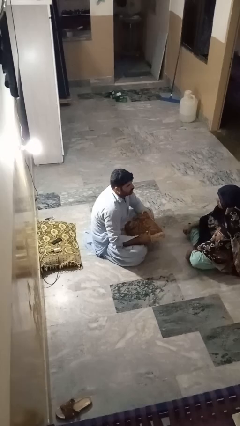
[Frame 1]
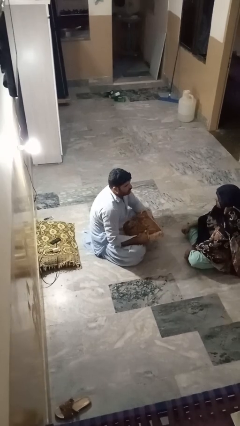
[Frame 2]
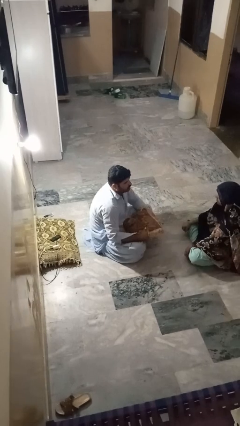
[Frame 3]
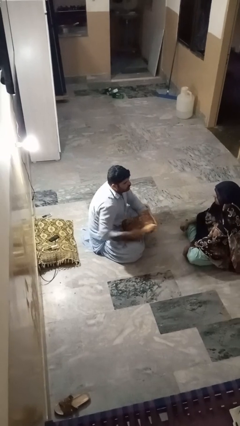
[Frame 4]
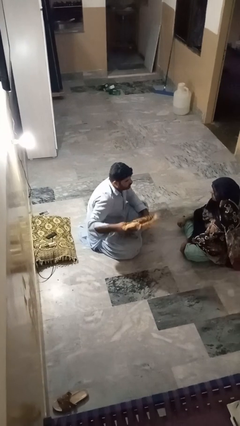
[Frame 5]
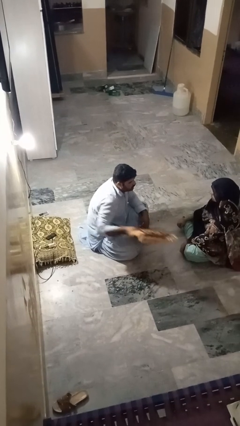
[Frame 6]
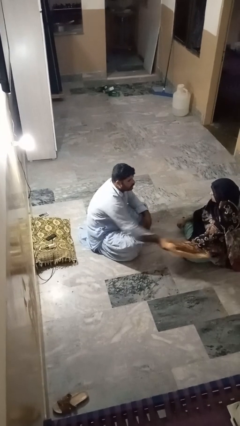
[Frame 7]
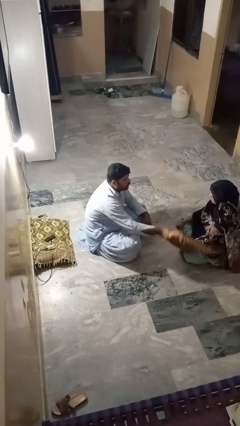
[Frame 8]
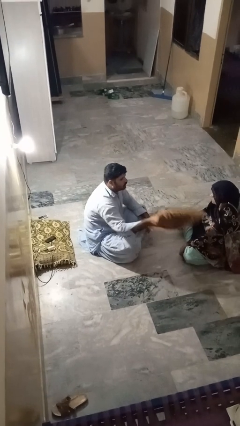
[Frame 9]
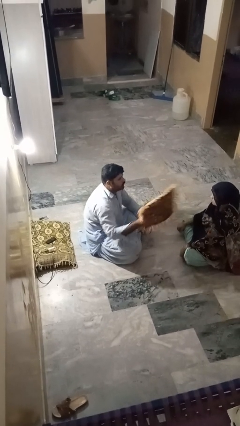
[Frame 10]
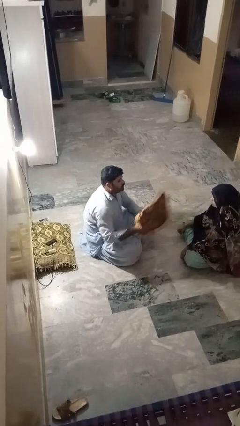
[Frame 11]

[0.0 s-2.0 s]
person hits person with pillow

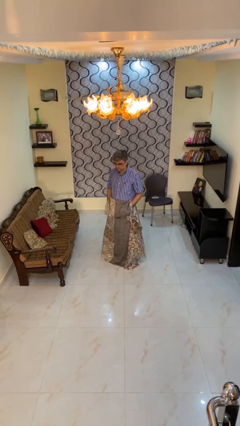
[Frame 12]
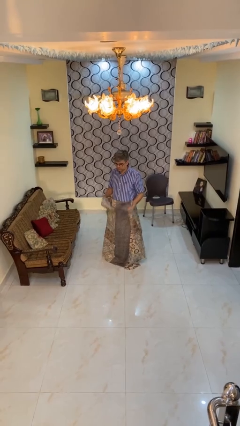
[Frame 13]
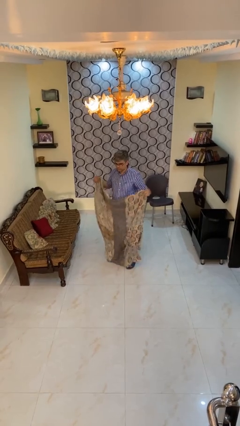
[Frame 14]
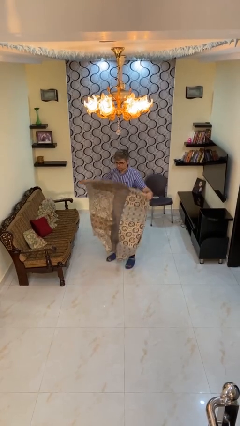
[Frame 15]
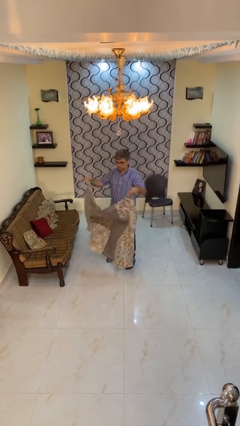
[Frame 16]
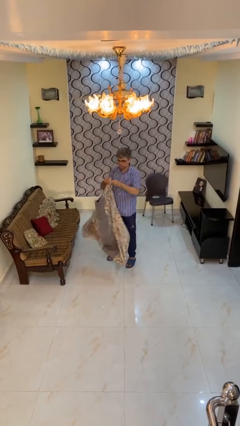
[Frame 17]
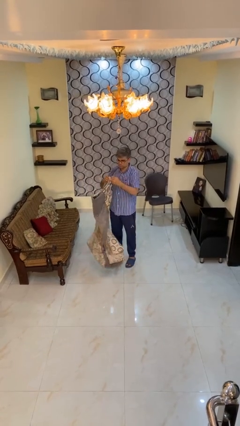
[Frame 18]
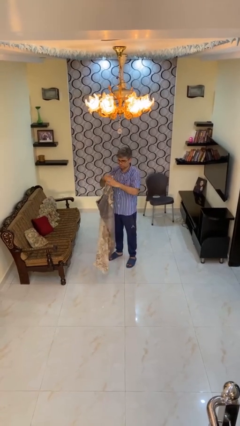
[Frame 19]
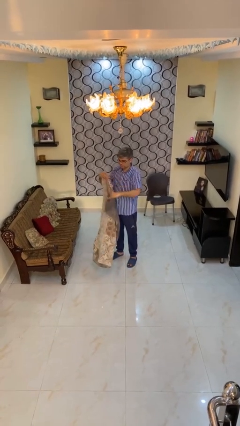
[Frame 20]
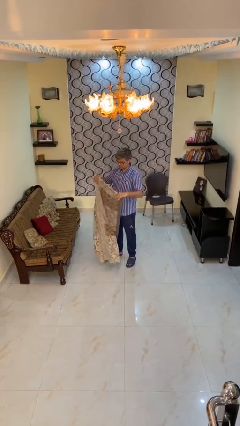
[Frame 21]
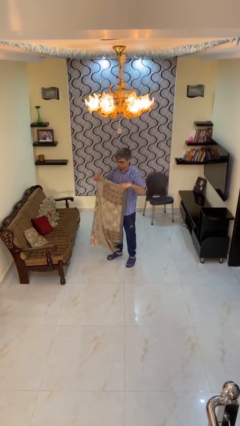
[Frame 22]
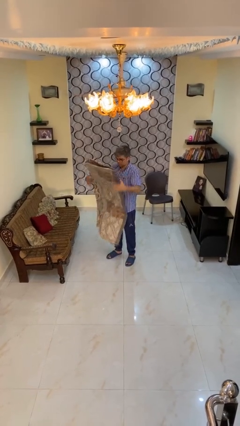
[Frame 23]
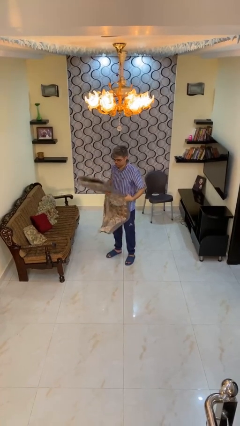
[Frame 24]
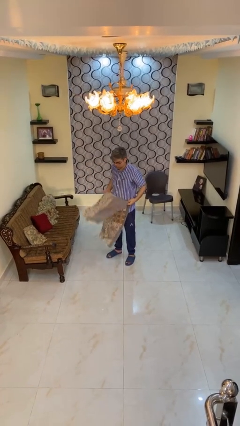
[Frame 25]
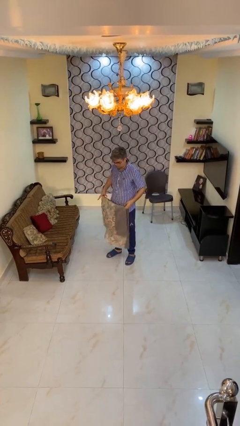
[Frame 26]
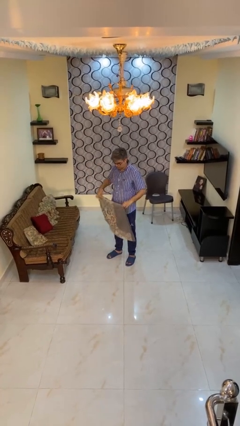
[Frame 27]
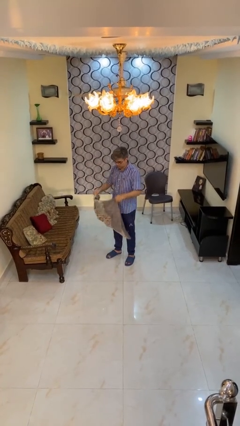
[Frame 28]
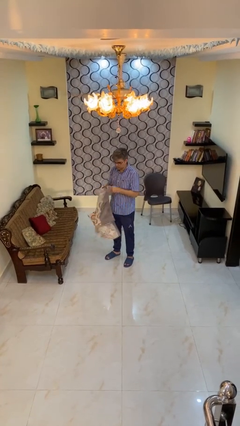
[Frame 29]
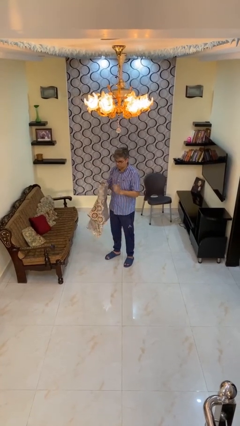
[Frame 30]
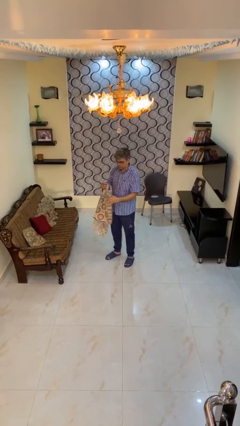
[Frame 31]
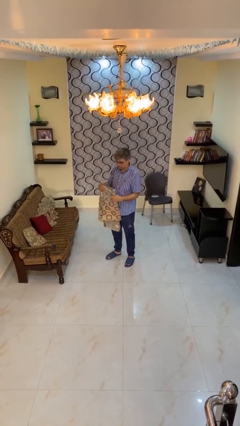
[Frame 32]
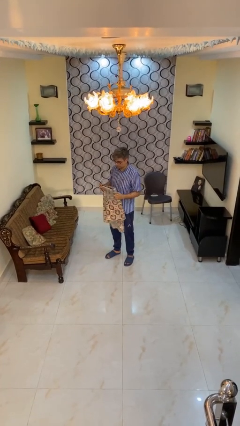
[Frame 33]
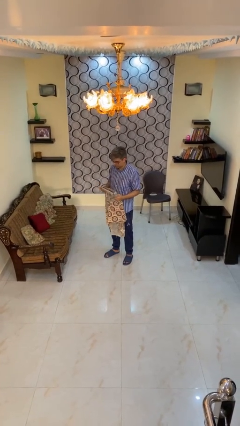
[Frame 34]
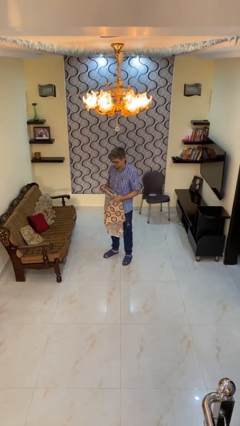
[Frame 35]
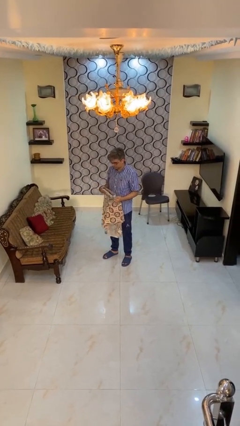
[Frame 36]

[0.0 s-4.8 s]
person folds blanket

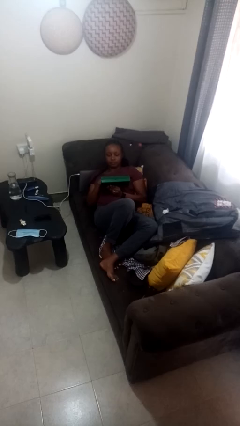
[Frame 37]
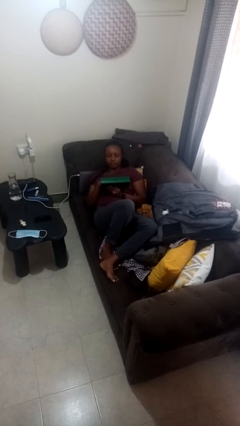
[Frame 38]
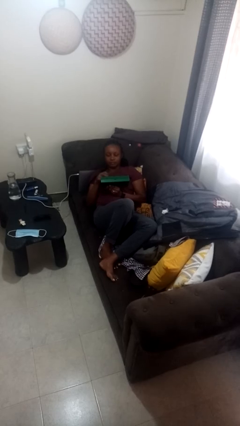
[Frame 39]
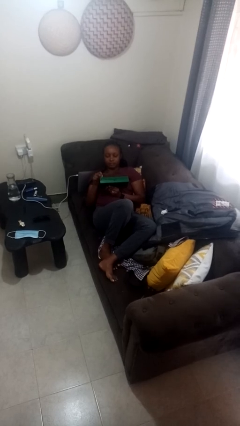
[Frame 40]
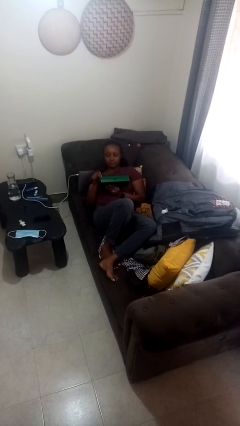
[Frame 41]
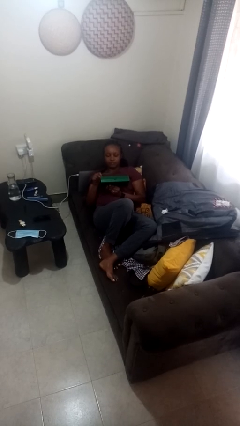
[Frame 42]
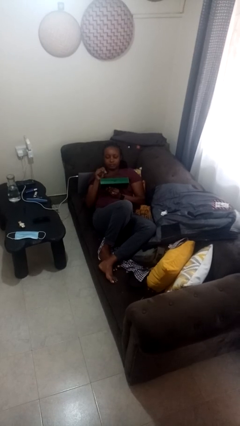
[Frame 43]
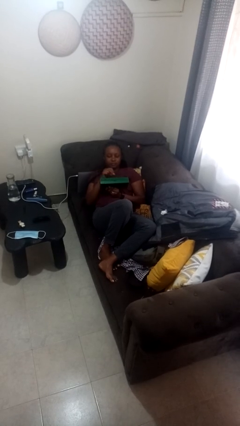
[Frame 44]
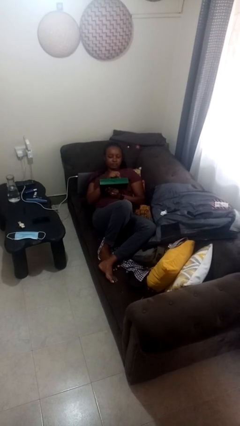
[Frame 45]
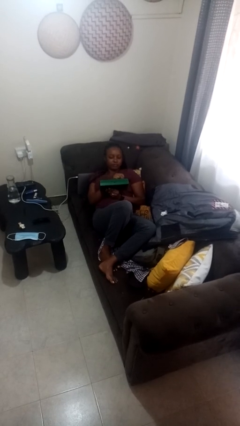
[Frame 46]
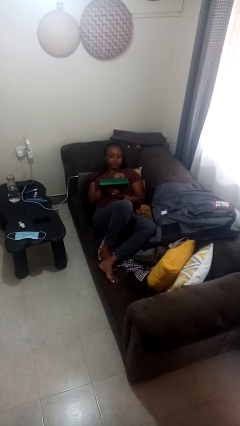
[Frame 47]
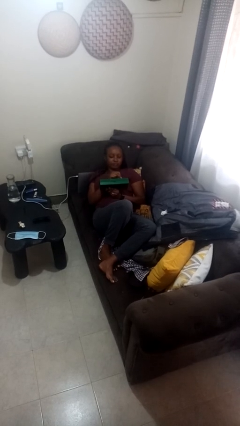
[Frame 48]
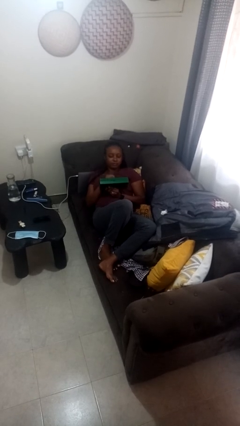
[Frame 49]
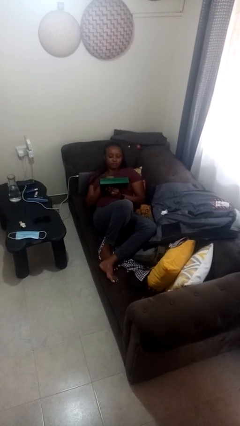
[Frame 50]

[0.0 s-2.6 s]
person interacts with handheld game

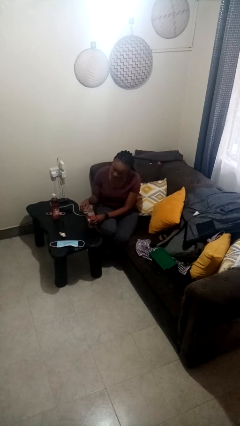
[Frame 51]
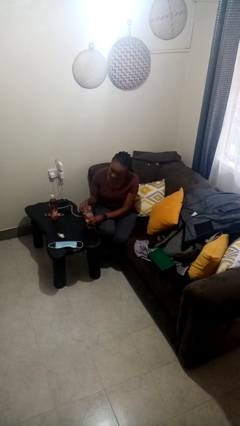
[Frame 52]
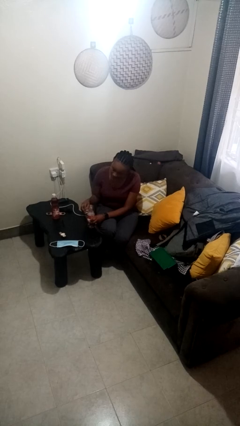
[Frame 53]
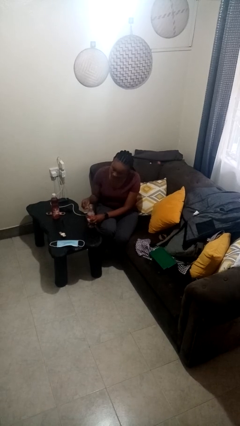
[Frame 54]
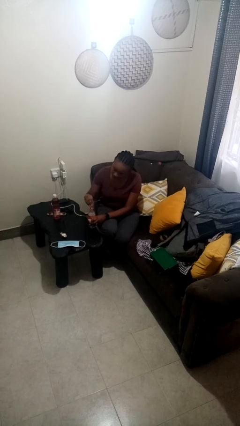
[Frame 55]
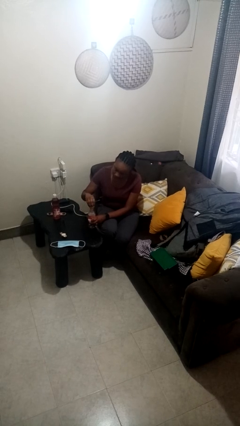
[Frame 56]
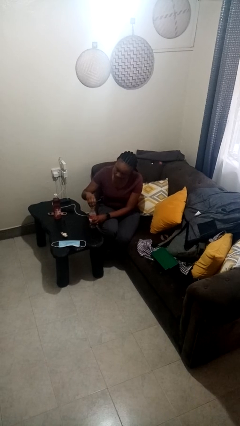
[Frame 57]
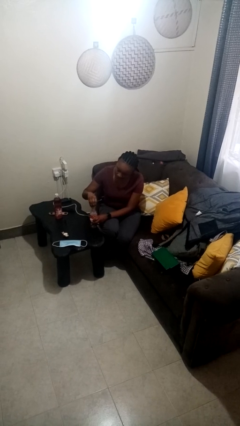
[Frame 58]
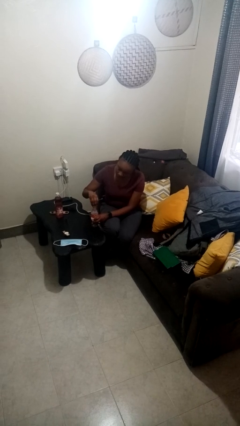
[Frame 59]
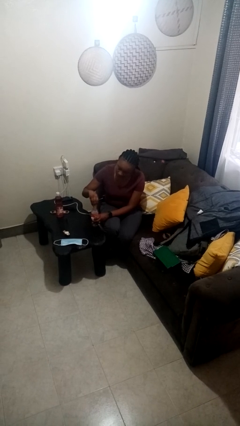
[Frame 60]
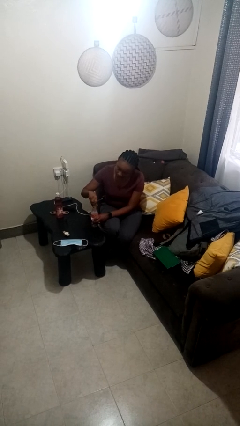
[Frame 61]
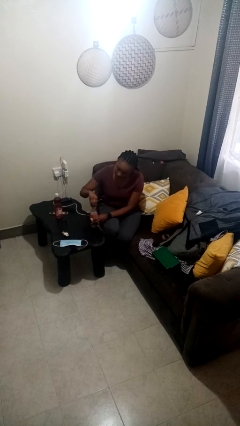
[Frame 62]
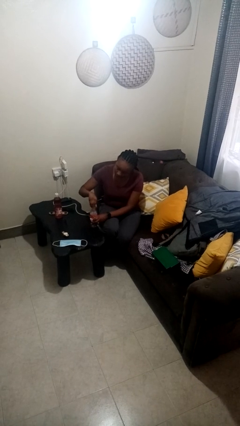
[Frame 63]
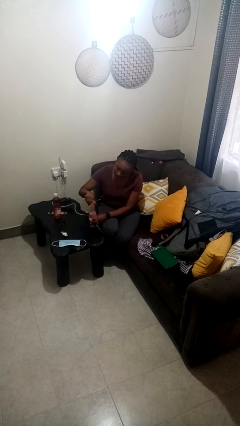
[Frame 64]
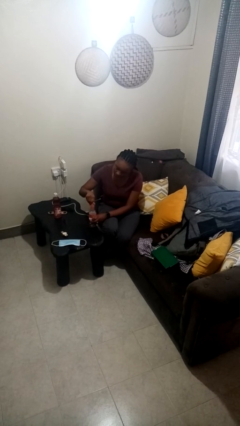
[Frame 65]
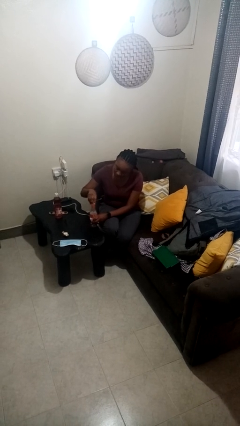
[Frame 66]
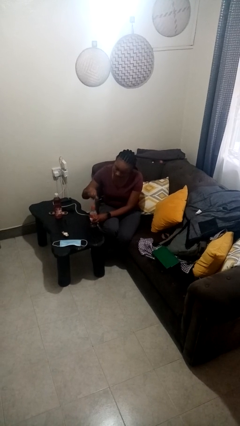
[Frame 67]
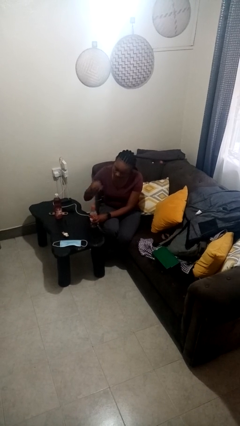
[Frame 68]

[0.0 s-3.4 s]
person screws lid to bottle

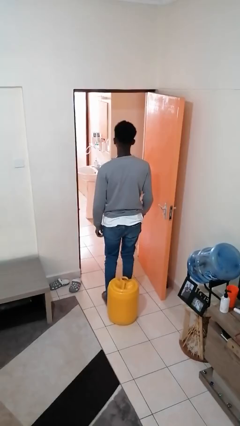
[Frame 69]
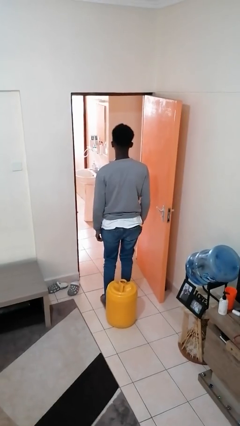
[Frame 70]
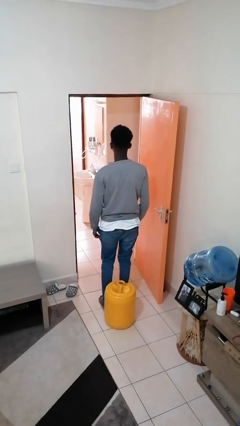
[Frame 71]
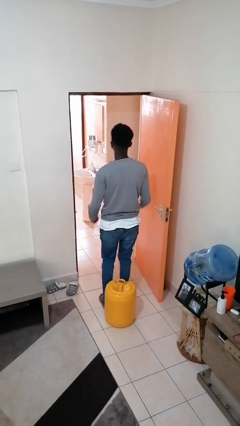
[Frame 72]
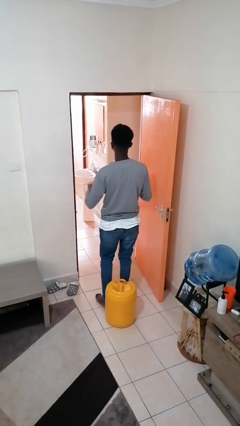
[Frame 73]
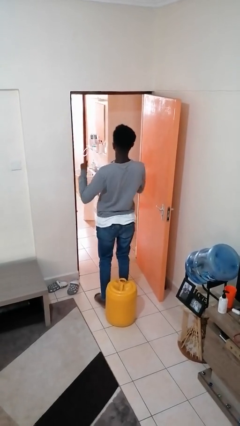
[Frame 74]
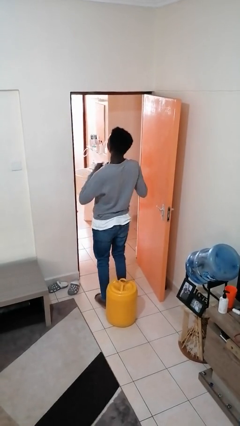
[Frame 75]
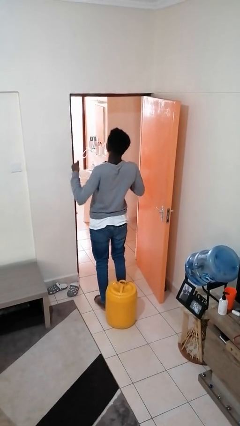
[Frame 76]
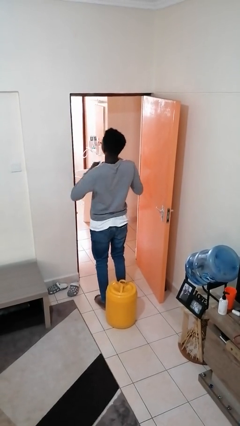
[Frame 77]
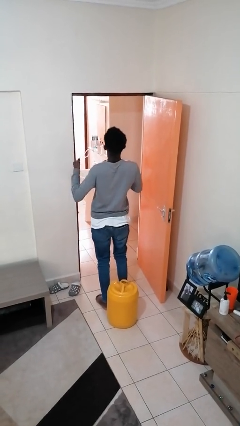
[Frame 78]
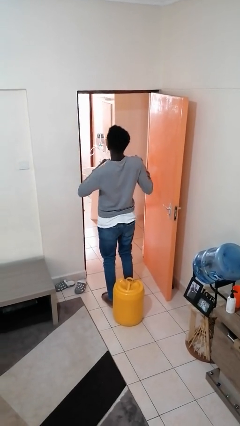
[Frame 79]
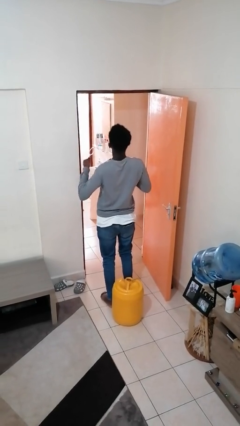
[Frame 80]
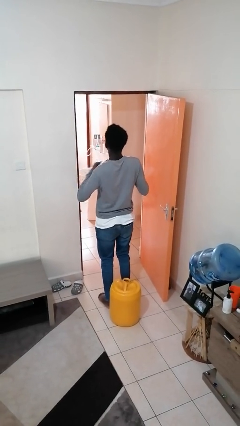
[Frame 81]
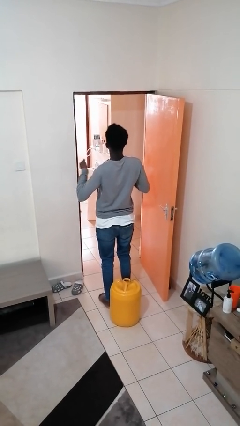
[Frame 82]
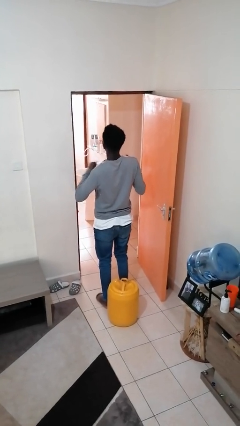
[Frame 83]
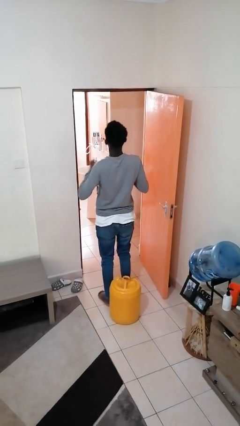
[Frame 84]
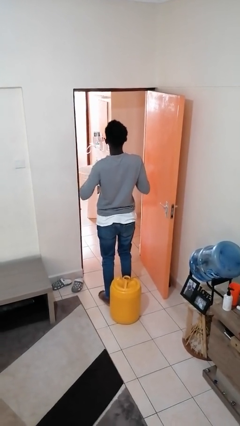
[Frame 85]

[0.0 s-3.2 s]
person drums on chest

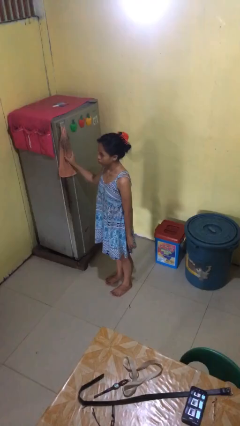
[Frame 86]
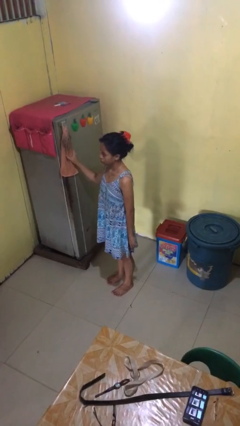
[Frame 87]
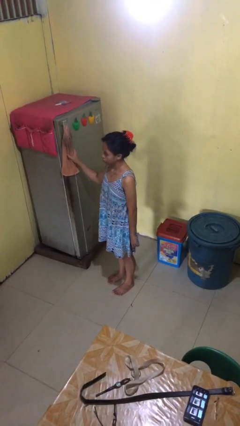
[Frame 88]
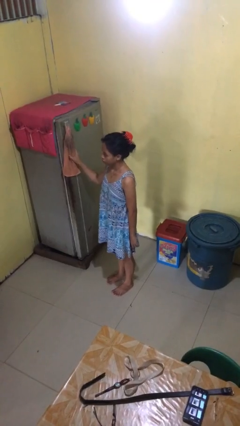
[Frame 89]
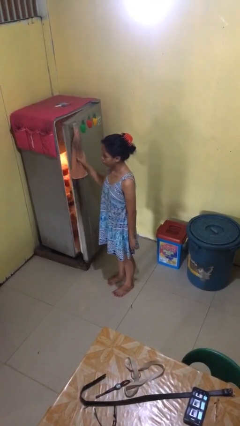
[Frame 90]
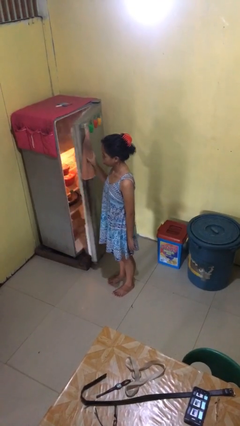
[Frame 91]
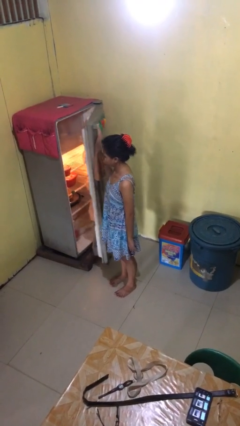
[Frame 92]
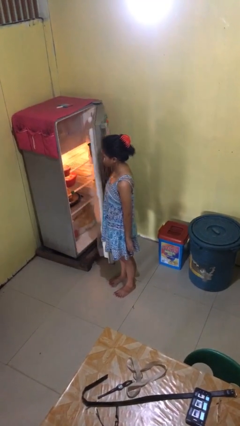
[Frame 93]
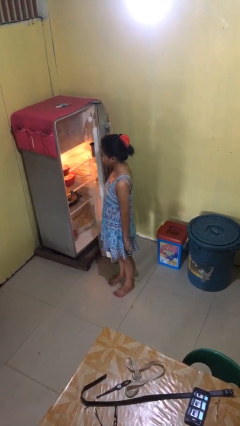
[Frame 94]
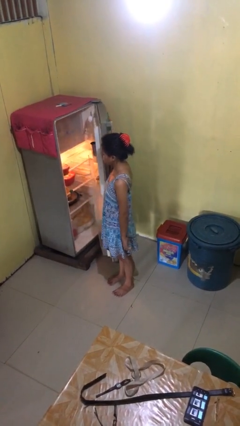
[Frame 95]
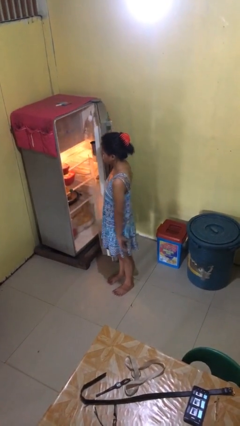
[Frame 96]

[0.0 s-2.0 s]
person opens refrigerator
